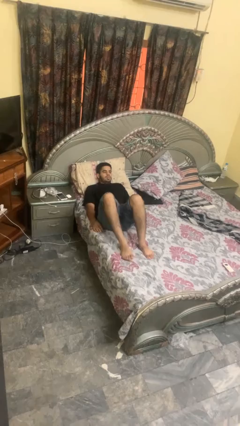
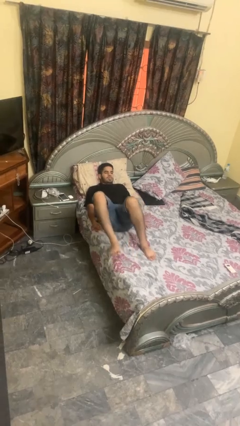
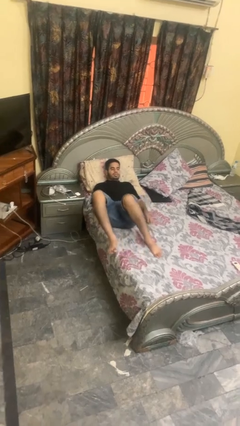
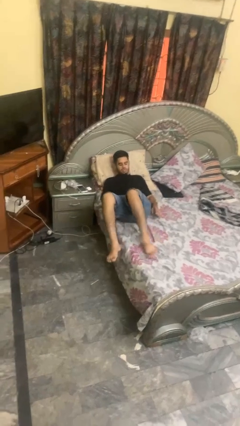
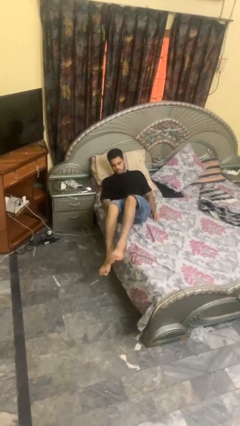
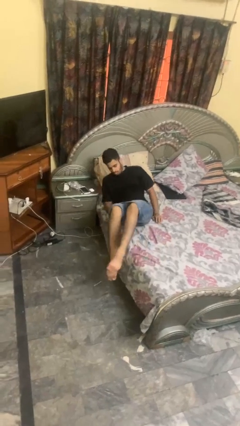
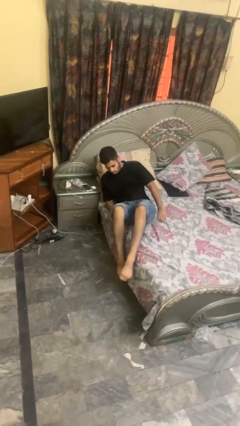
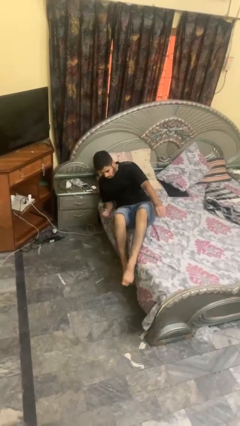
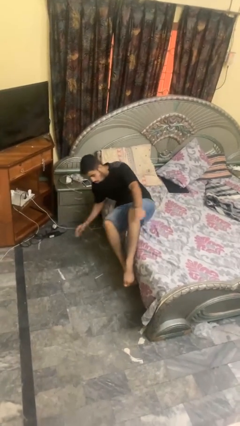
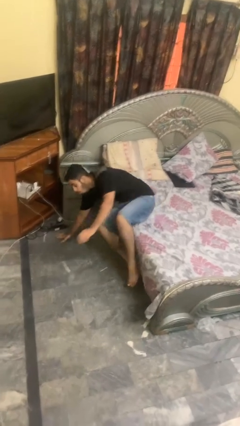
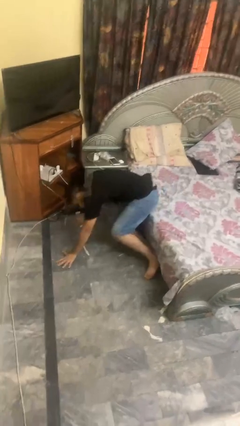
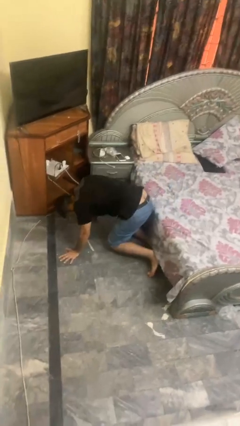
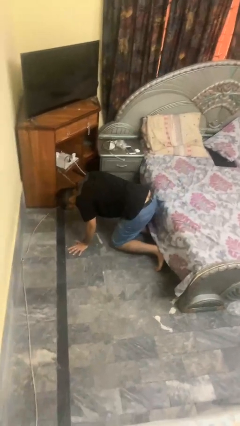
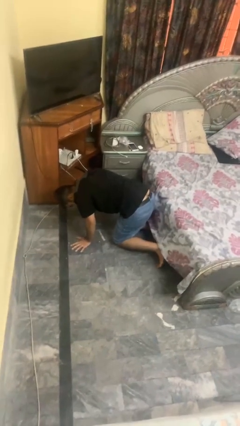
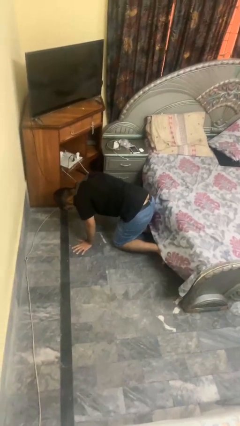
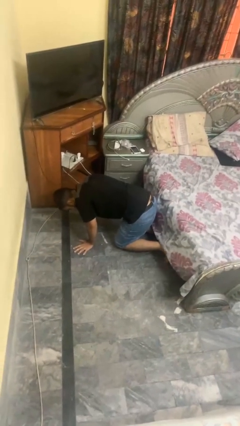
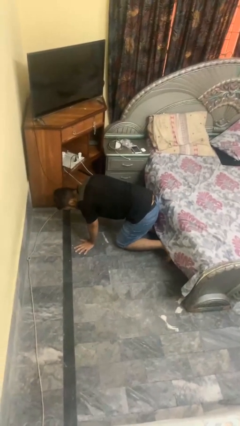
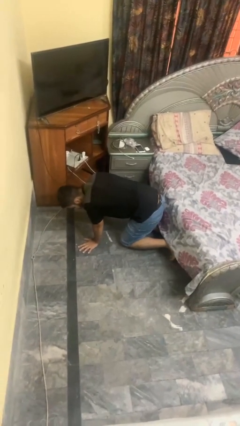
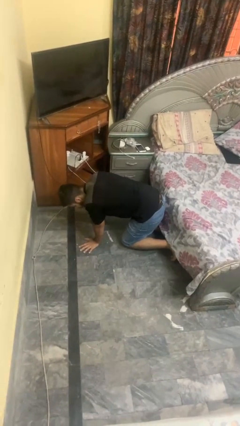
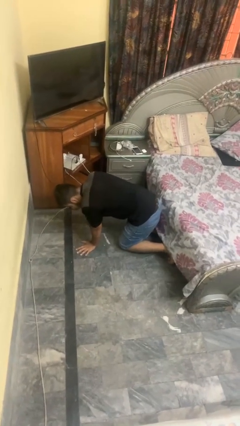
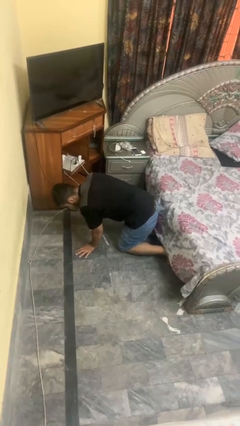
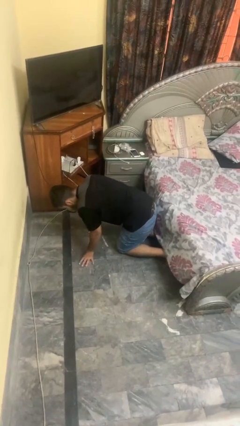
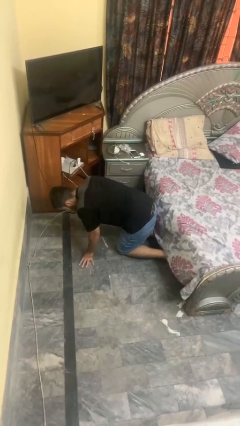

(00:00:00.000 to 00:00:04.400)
person falls from bed

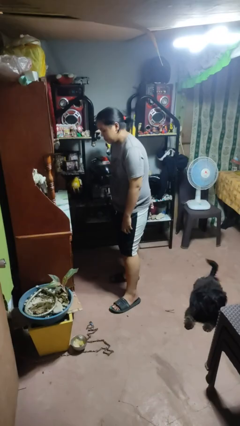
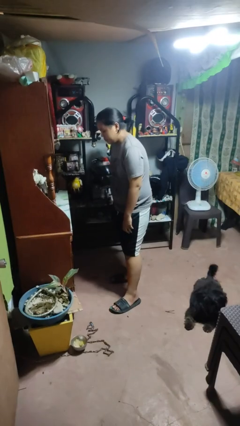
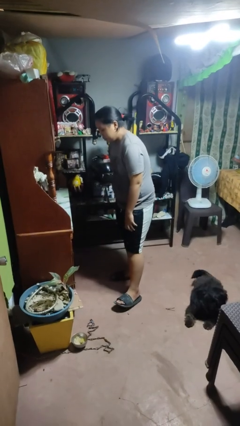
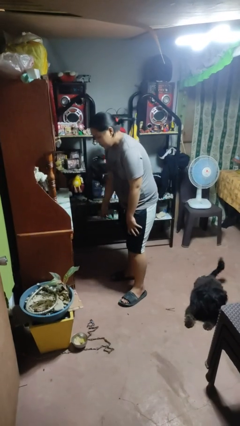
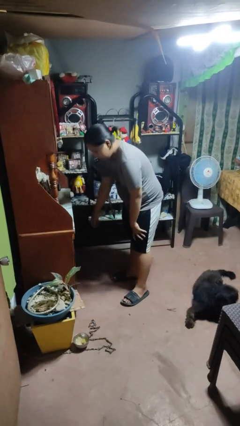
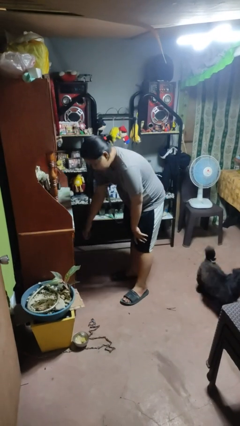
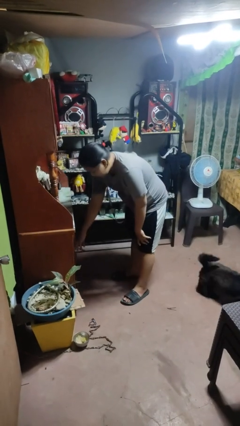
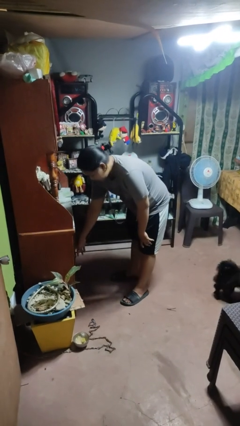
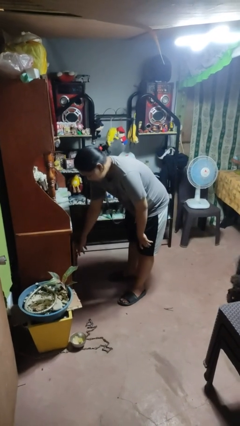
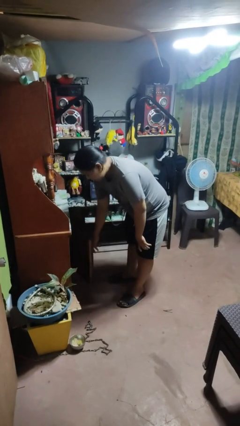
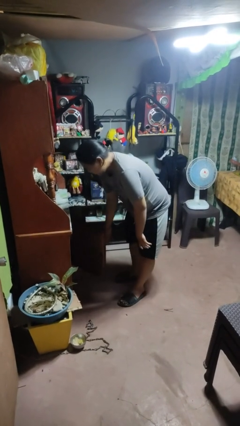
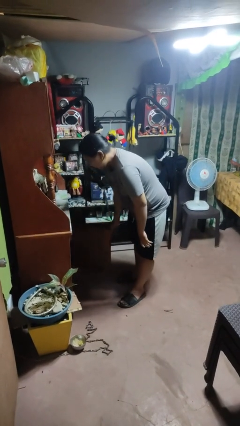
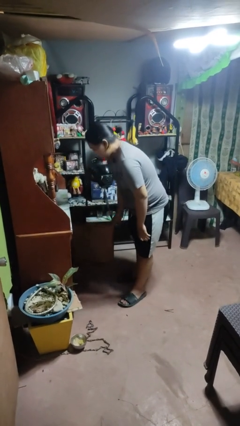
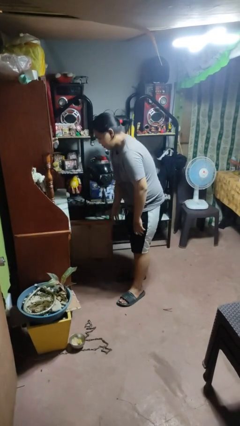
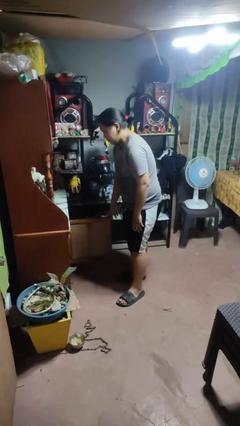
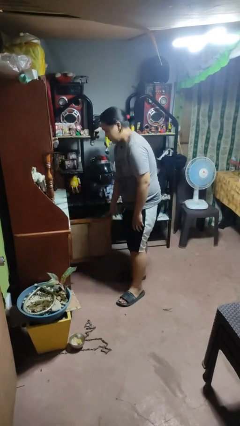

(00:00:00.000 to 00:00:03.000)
person opens cabinet

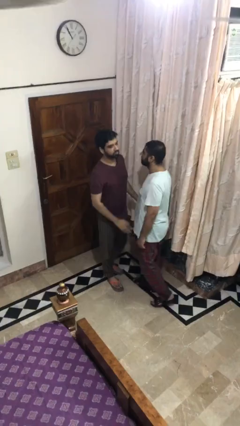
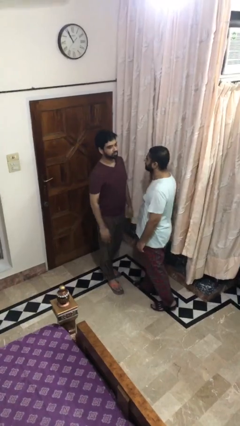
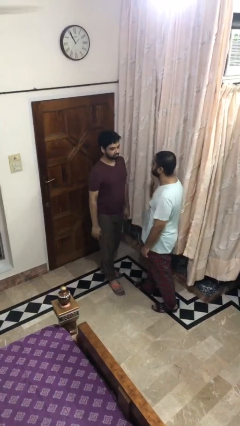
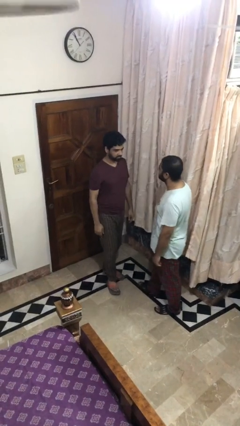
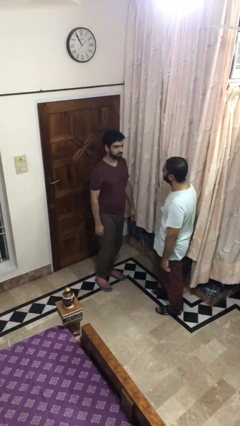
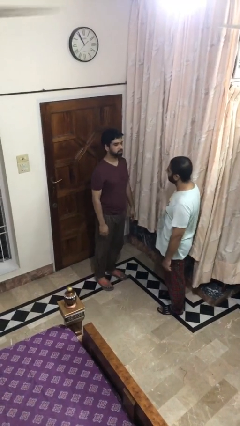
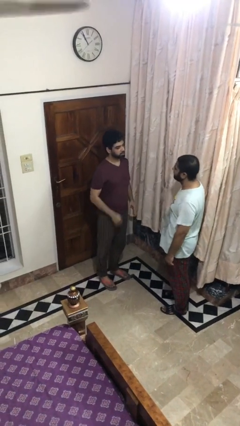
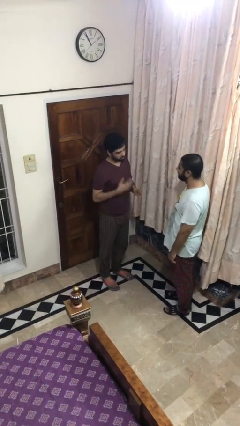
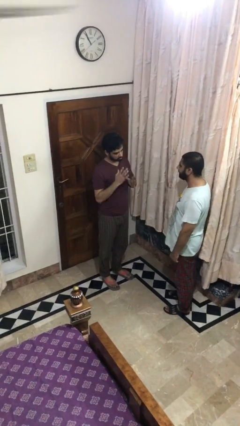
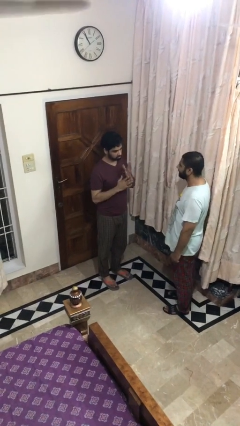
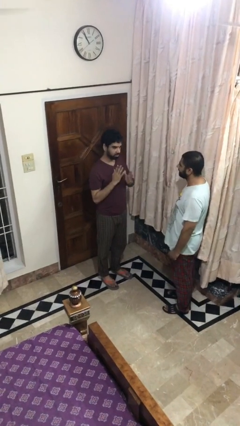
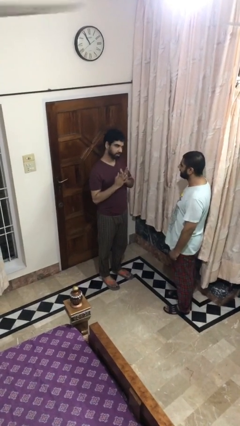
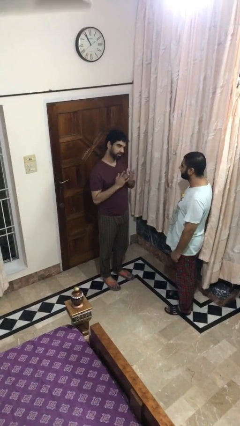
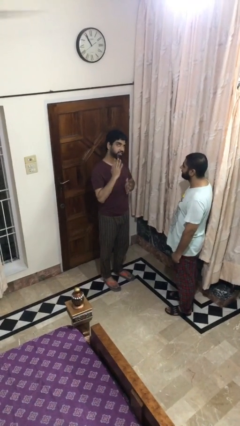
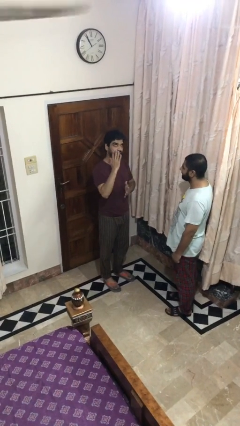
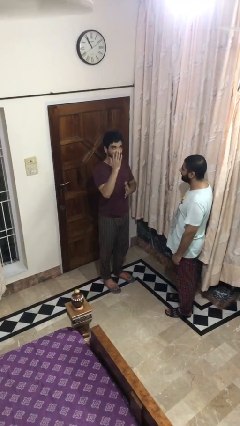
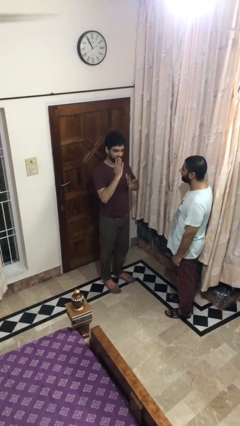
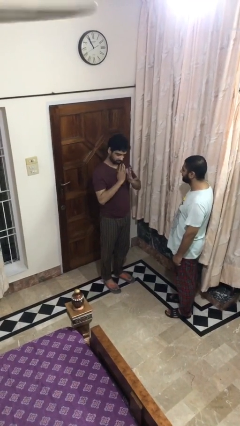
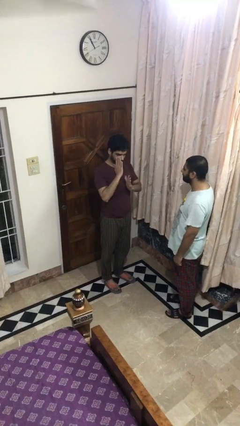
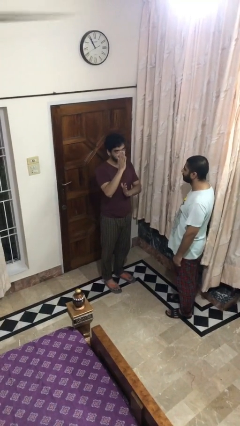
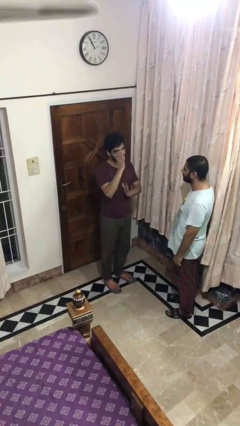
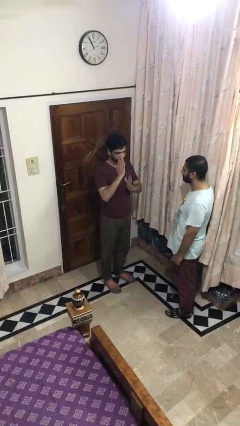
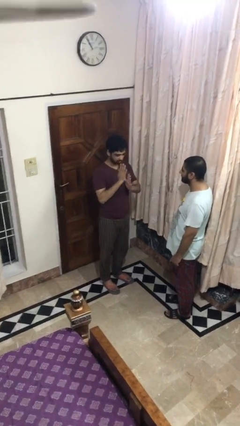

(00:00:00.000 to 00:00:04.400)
person talks to person

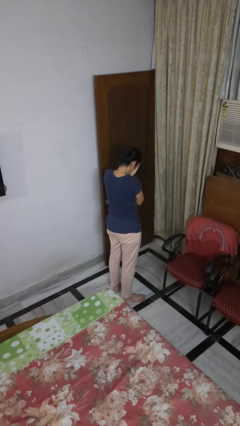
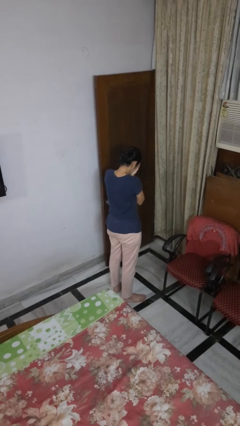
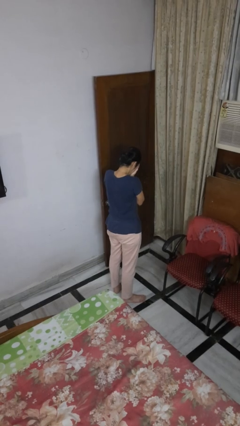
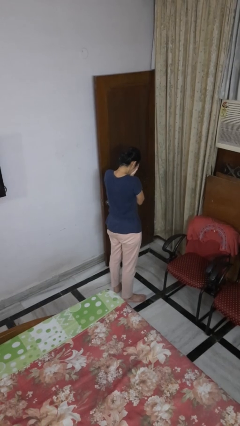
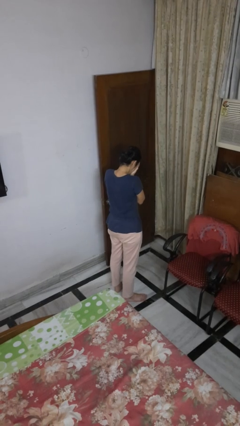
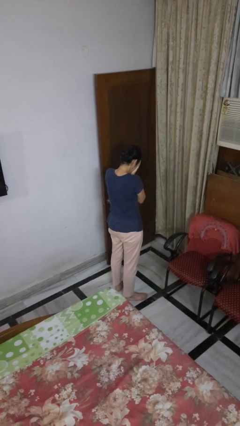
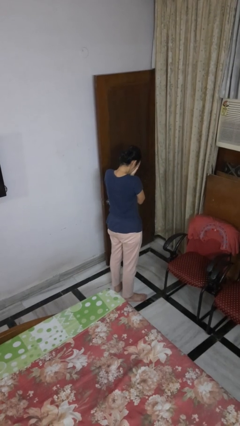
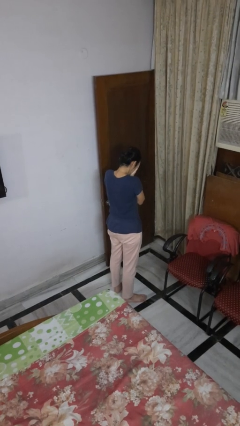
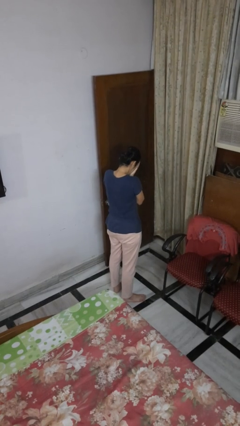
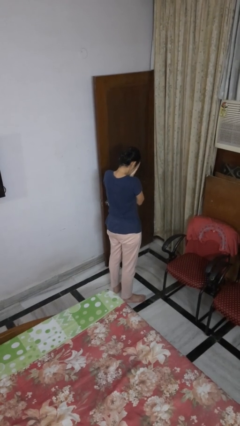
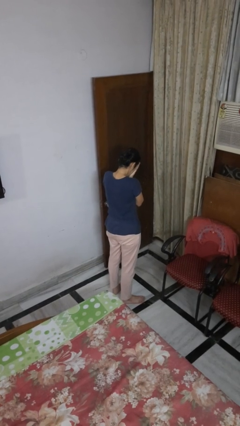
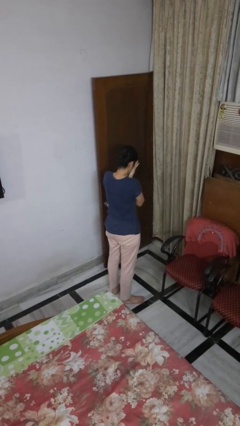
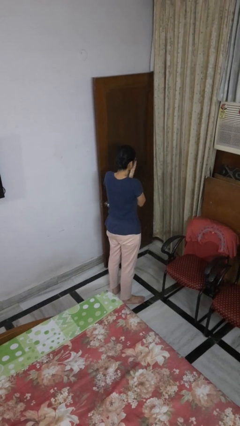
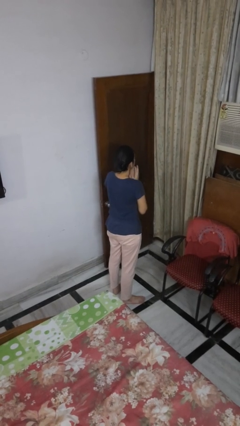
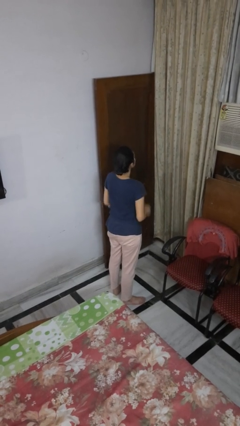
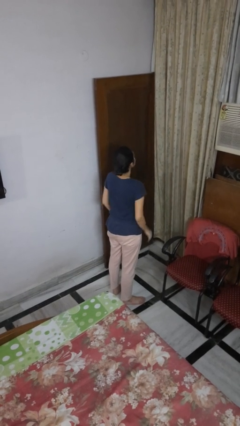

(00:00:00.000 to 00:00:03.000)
person covers face with hands

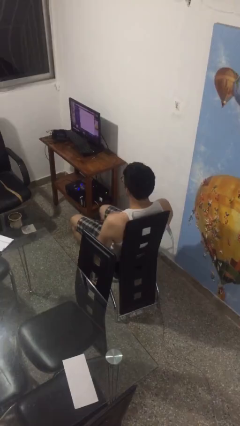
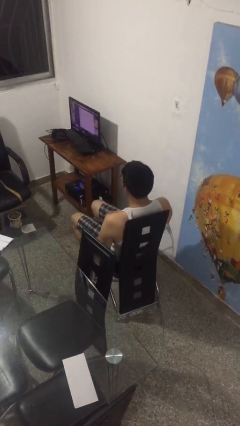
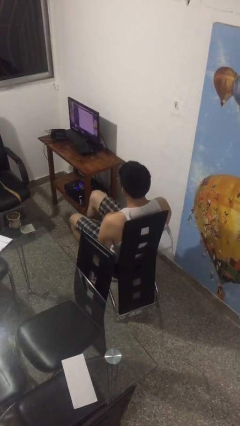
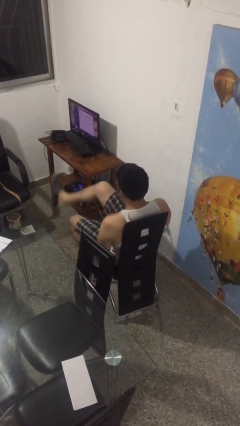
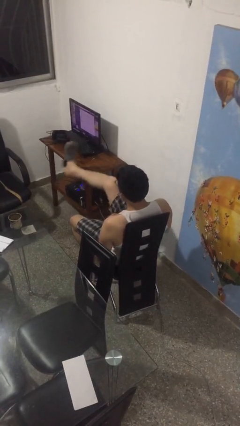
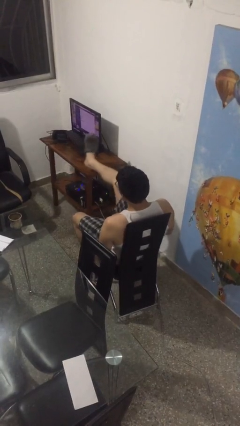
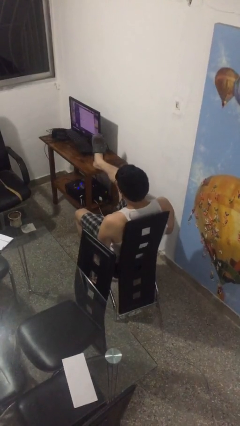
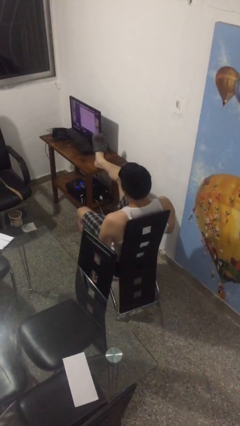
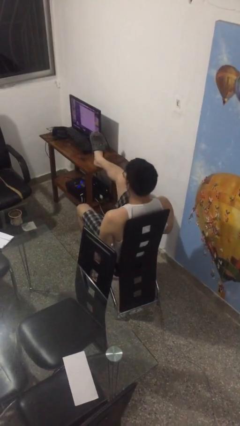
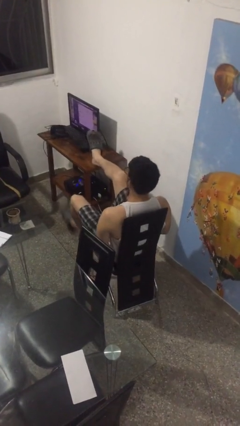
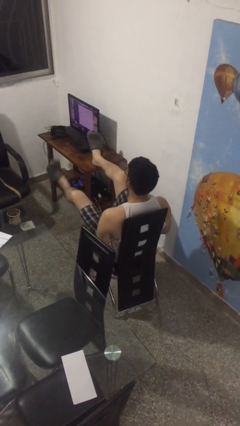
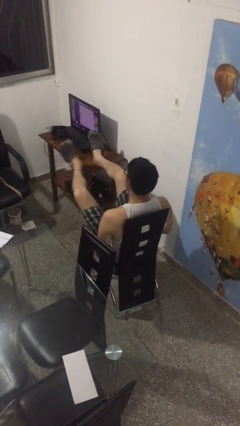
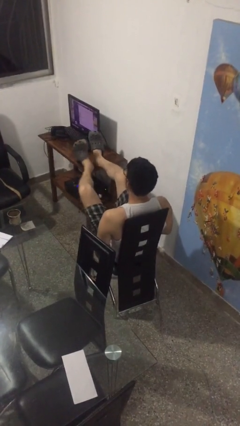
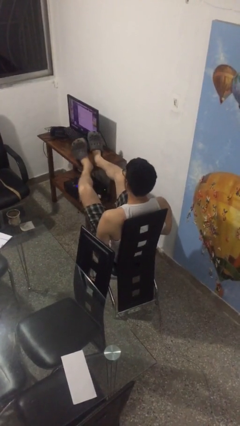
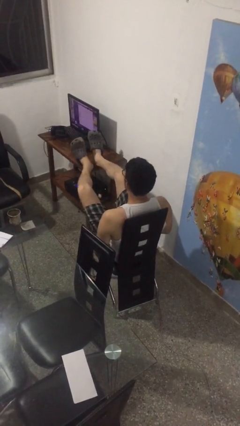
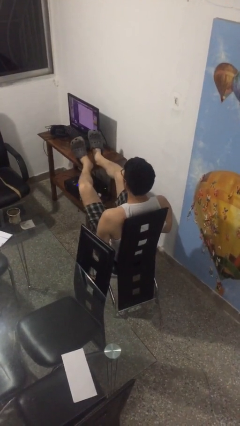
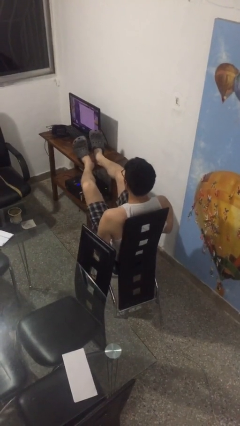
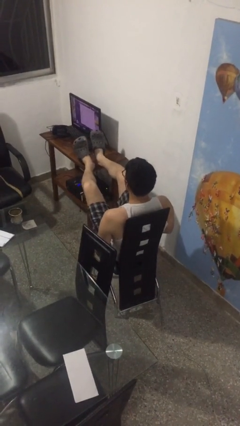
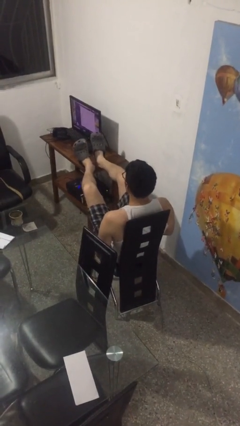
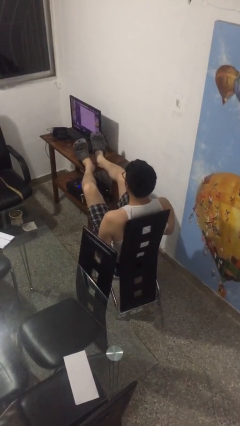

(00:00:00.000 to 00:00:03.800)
person puts feet up
